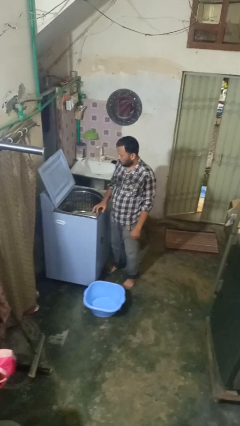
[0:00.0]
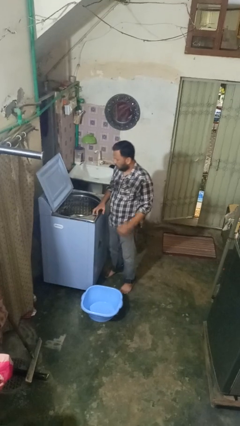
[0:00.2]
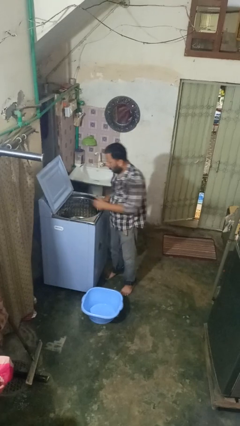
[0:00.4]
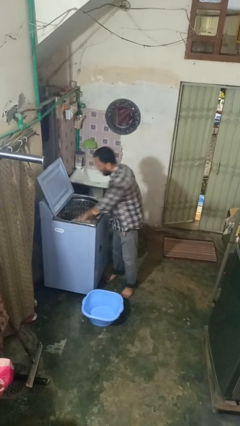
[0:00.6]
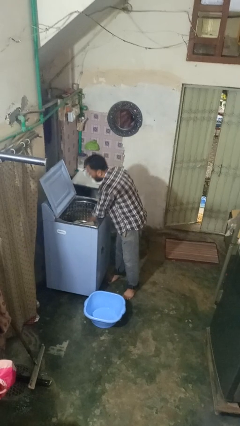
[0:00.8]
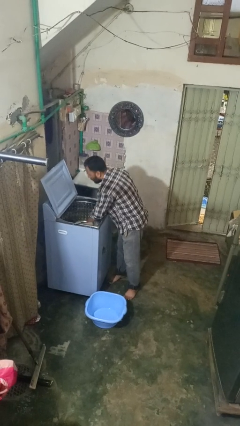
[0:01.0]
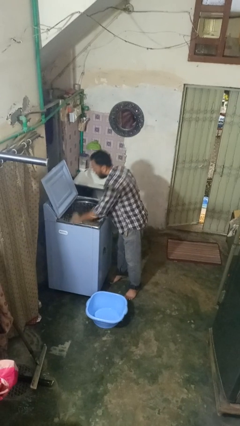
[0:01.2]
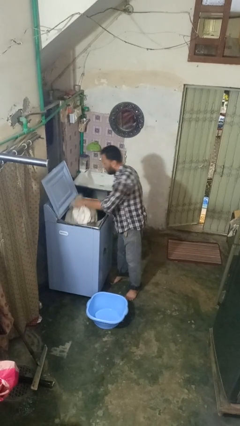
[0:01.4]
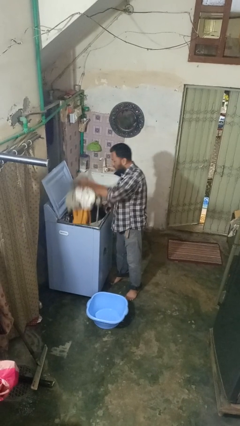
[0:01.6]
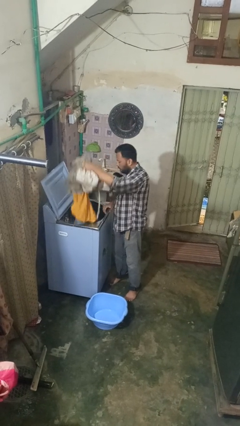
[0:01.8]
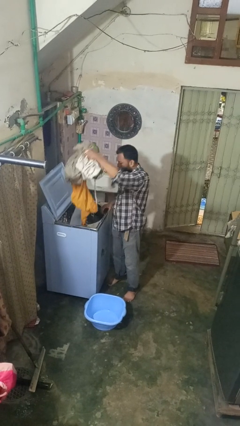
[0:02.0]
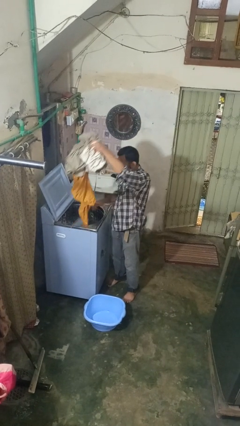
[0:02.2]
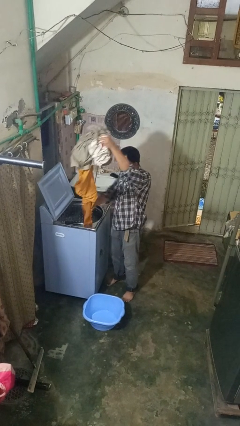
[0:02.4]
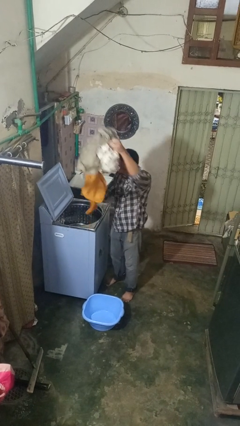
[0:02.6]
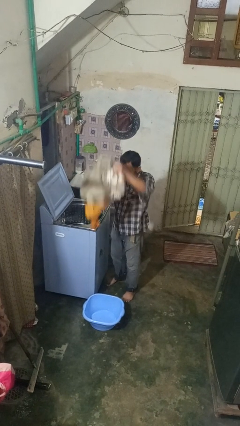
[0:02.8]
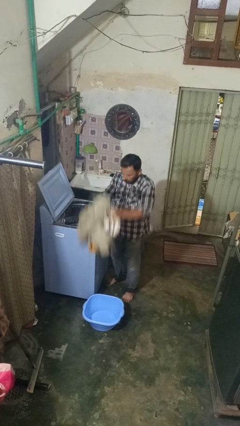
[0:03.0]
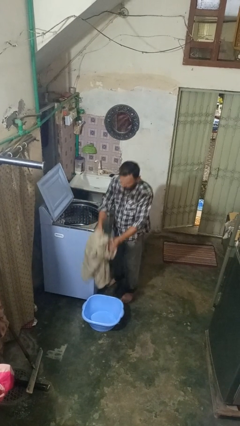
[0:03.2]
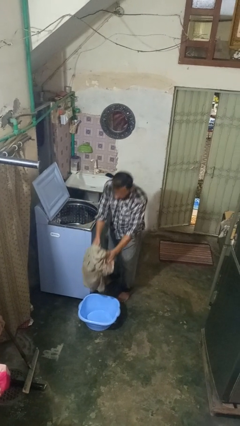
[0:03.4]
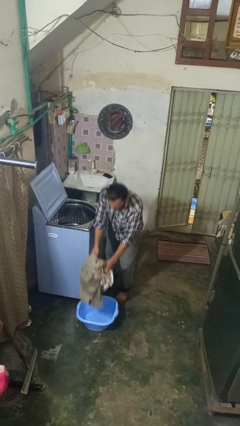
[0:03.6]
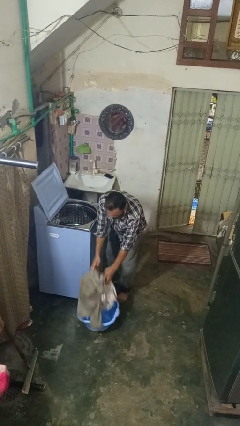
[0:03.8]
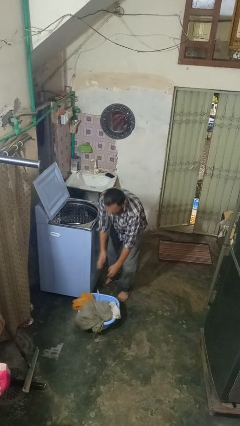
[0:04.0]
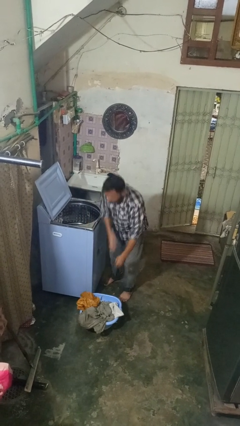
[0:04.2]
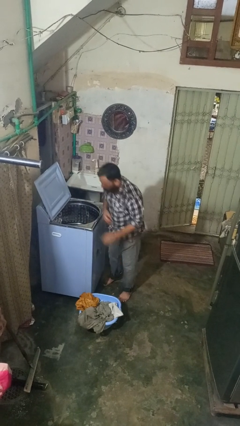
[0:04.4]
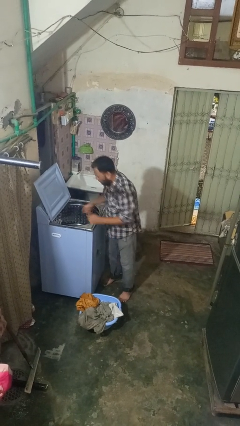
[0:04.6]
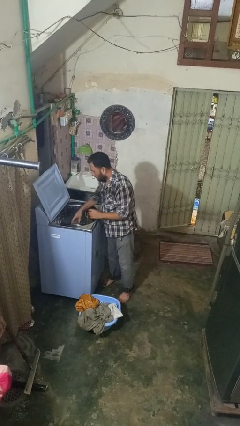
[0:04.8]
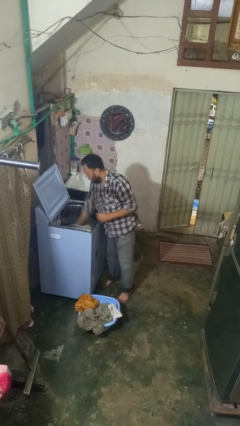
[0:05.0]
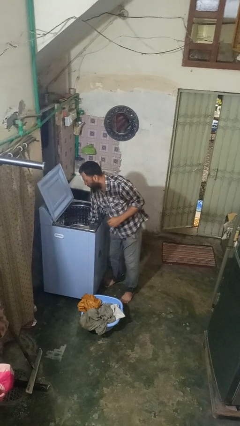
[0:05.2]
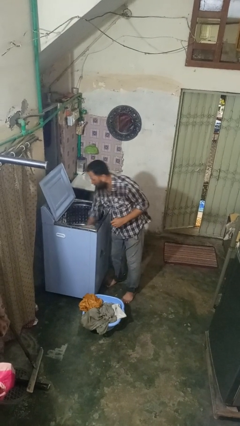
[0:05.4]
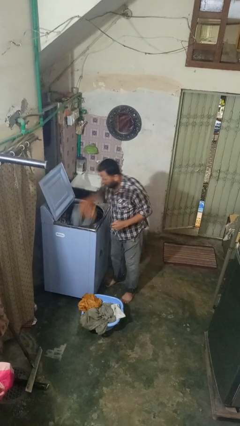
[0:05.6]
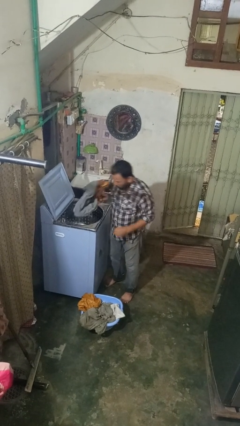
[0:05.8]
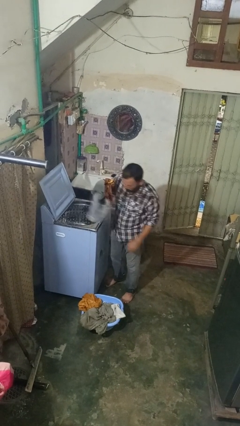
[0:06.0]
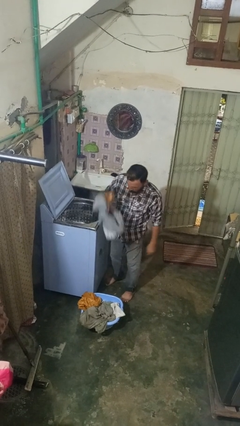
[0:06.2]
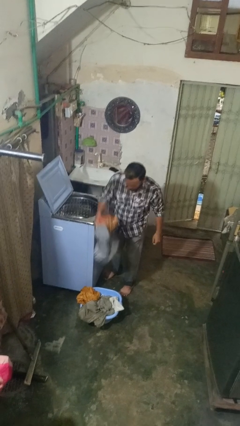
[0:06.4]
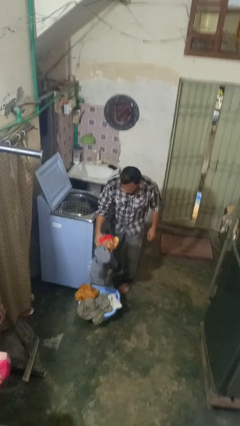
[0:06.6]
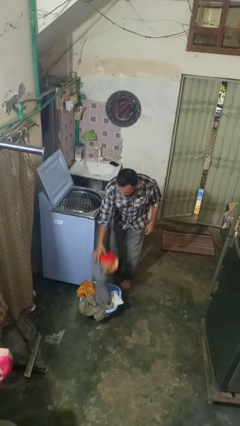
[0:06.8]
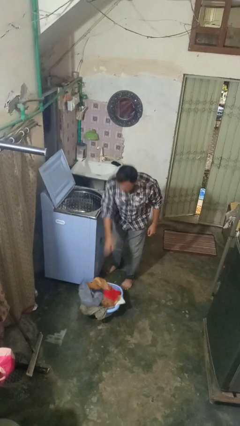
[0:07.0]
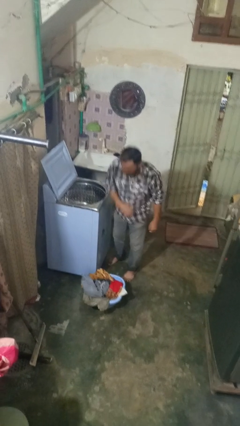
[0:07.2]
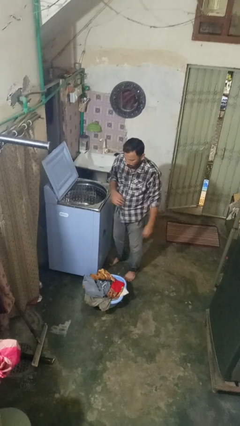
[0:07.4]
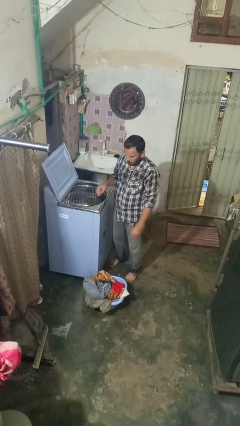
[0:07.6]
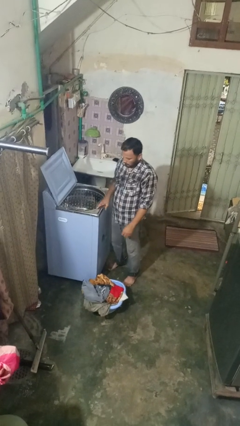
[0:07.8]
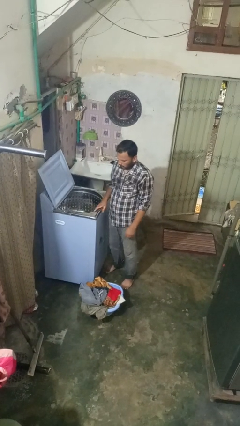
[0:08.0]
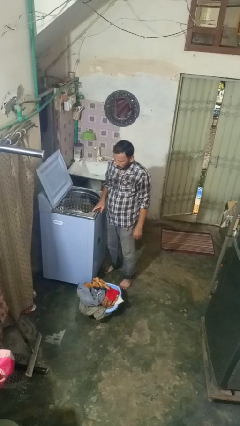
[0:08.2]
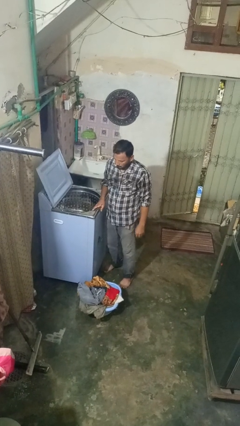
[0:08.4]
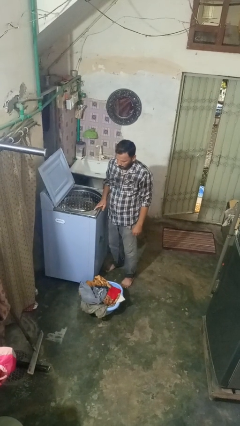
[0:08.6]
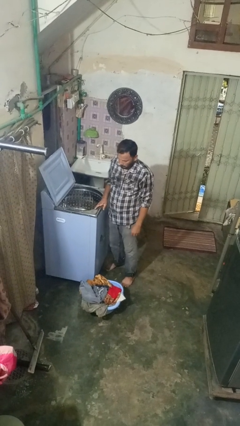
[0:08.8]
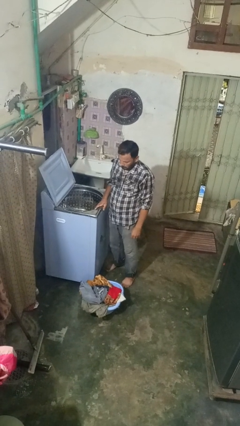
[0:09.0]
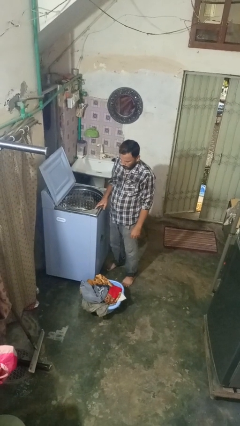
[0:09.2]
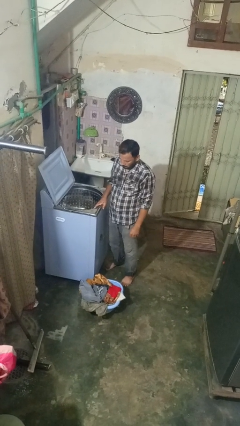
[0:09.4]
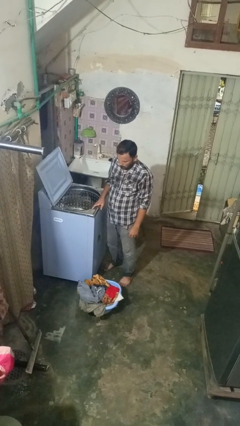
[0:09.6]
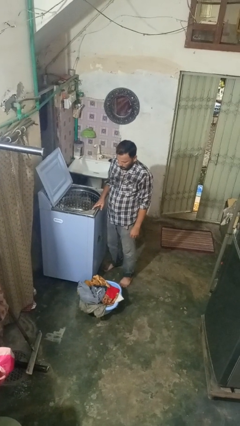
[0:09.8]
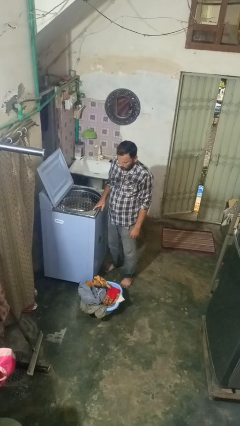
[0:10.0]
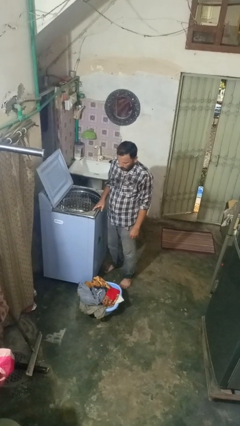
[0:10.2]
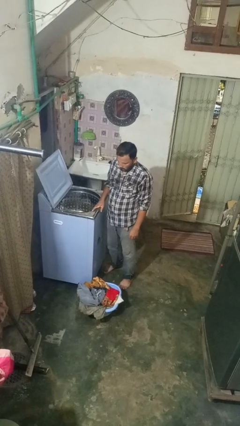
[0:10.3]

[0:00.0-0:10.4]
person unloads clotheswasher

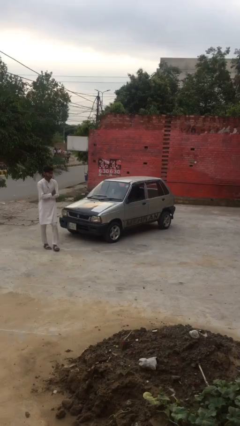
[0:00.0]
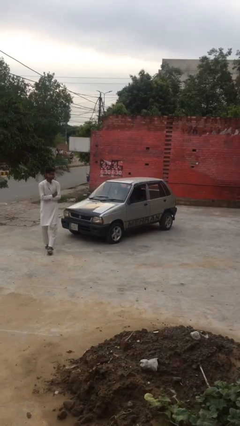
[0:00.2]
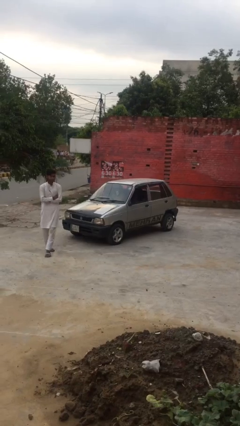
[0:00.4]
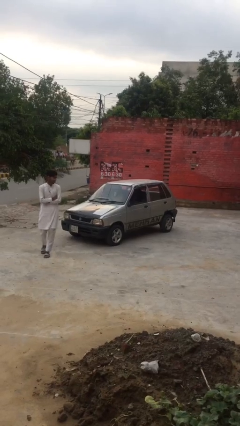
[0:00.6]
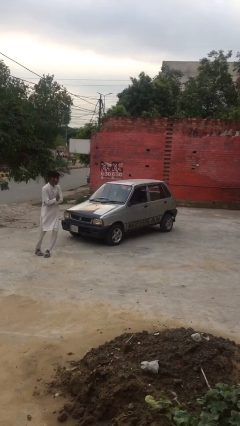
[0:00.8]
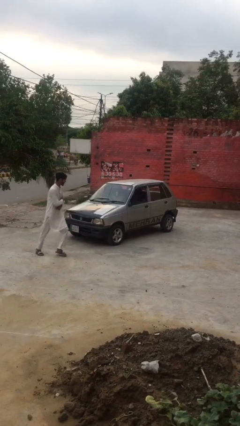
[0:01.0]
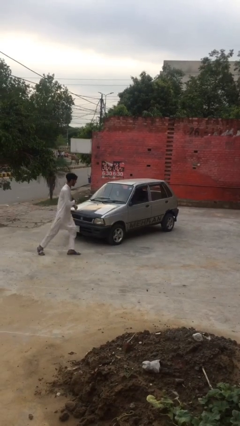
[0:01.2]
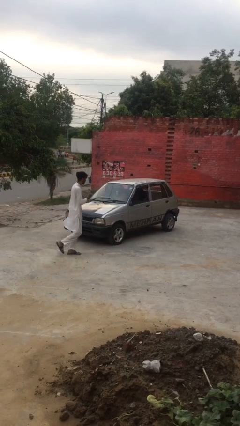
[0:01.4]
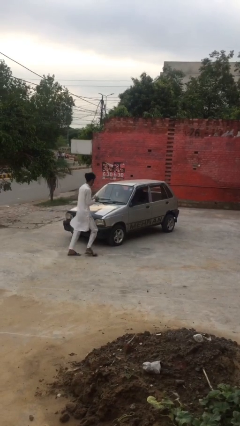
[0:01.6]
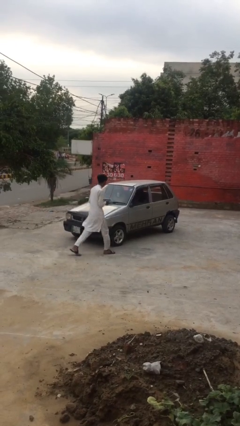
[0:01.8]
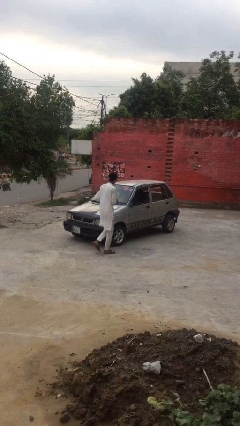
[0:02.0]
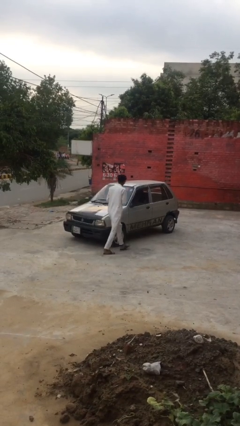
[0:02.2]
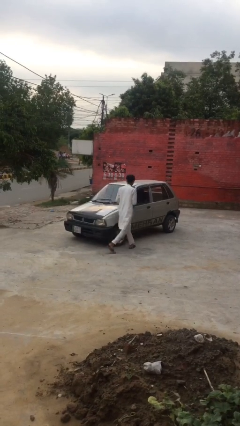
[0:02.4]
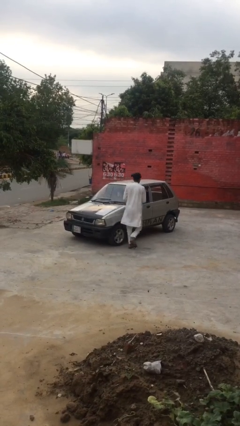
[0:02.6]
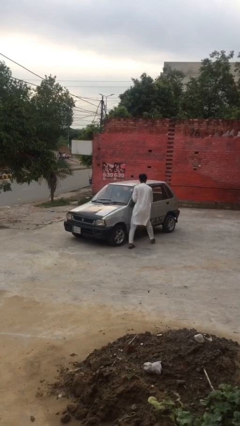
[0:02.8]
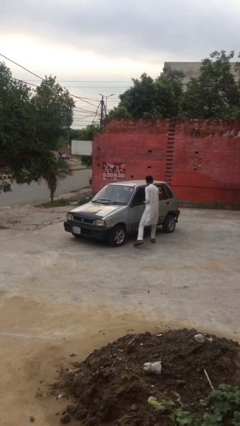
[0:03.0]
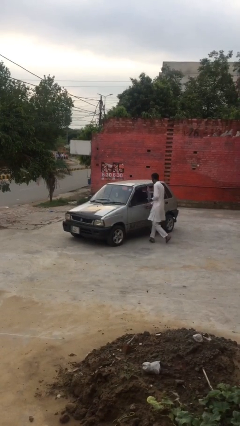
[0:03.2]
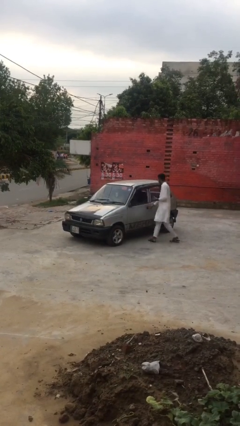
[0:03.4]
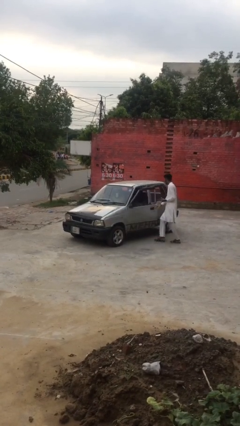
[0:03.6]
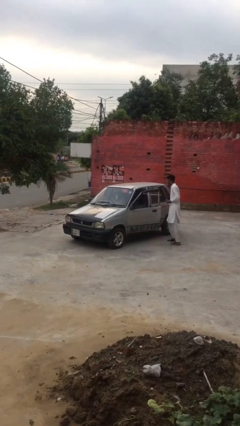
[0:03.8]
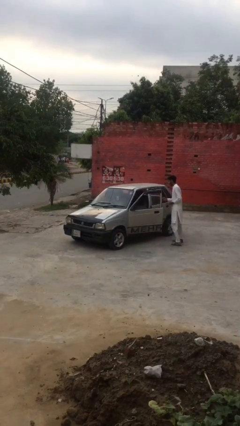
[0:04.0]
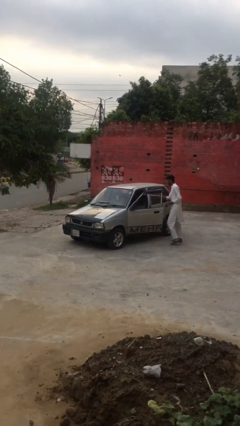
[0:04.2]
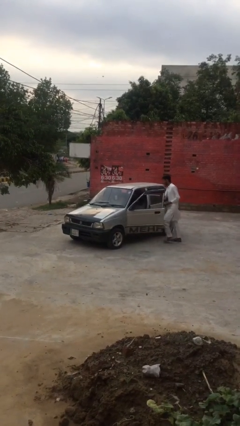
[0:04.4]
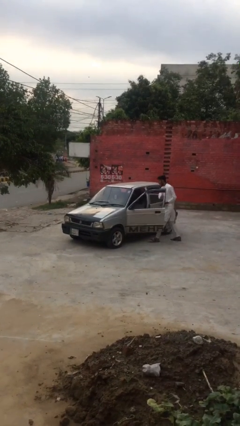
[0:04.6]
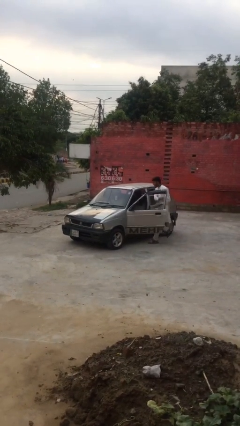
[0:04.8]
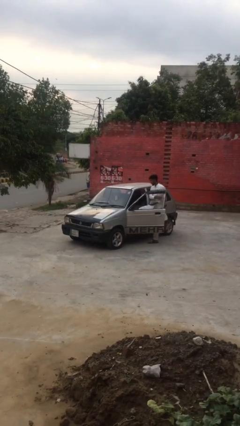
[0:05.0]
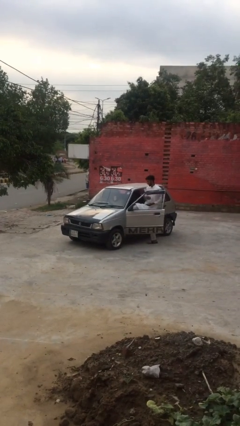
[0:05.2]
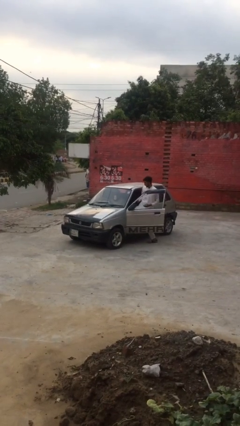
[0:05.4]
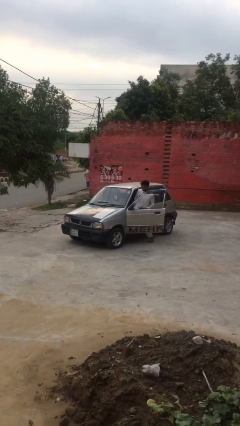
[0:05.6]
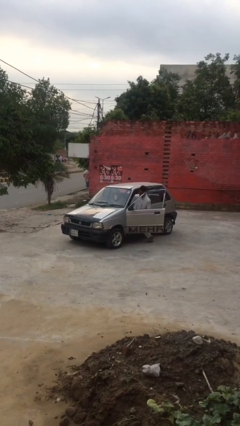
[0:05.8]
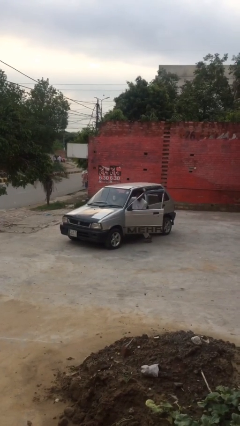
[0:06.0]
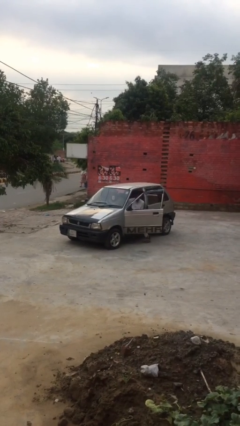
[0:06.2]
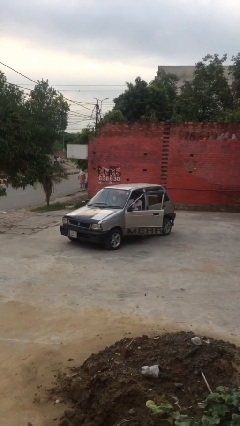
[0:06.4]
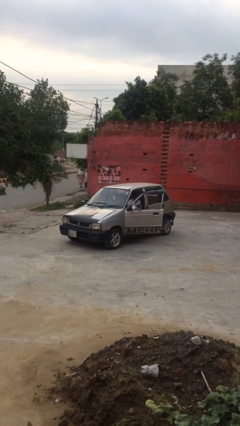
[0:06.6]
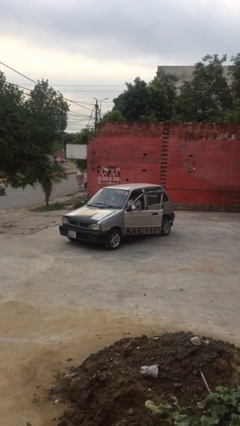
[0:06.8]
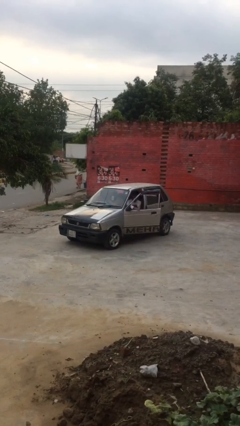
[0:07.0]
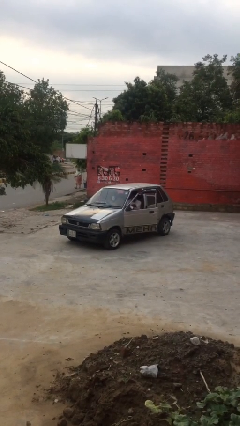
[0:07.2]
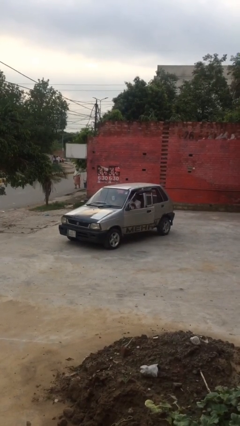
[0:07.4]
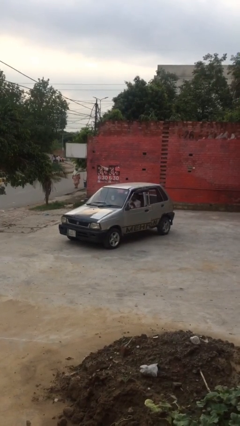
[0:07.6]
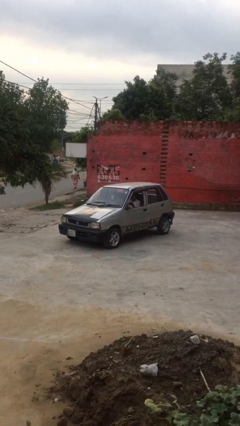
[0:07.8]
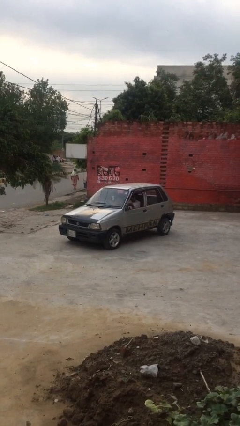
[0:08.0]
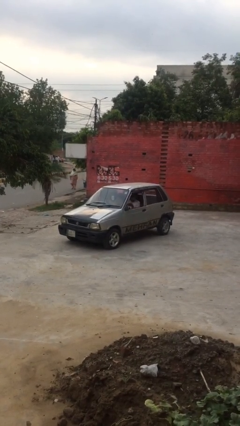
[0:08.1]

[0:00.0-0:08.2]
car picks up person
